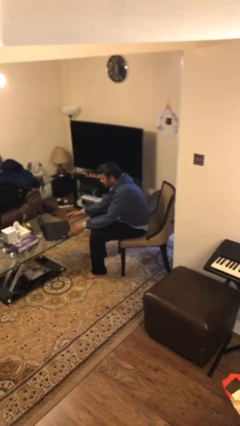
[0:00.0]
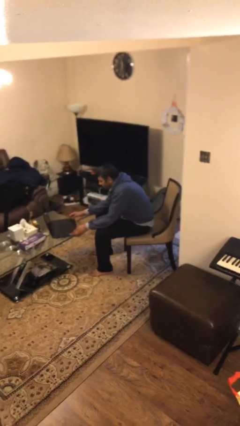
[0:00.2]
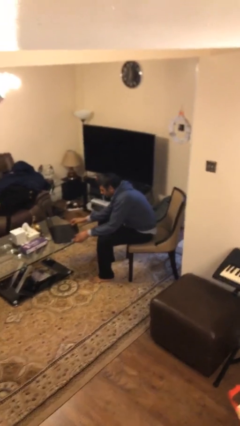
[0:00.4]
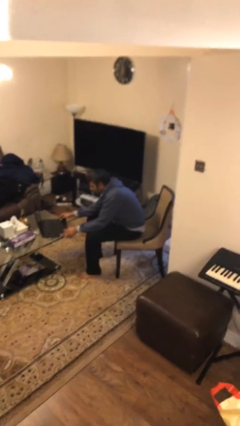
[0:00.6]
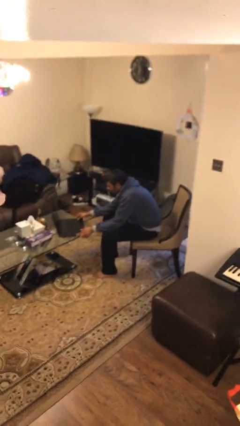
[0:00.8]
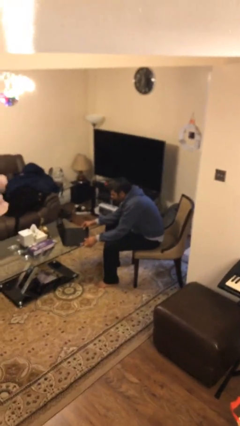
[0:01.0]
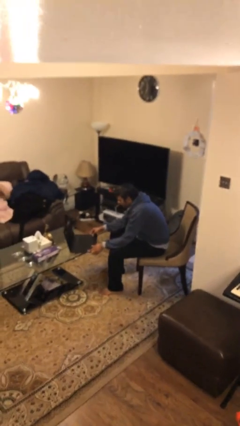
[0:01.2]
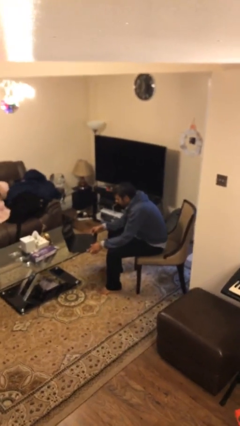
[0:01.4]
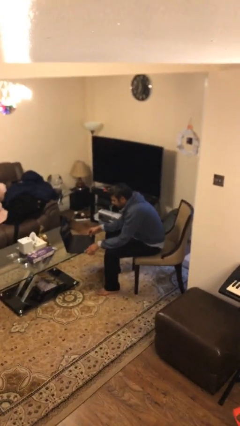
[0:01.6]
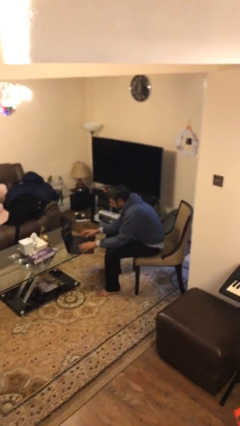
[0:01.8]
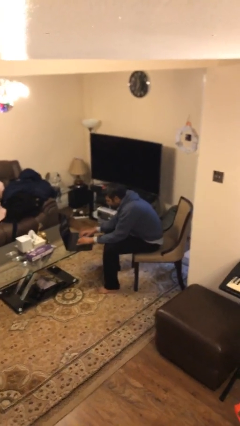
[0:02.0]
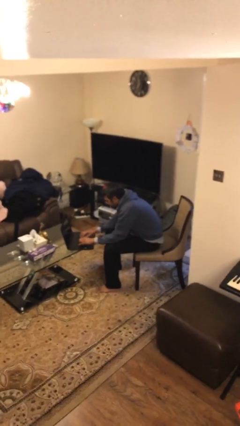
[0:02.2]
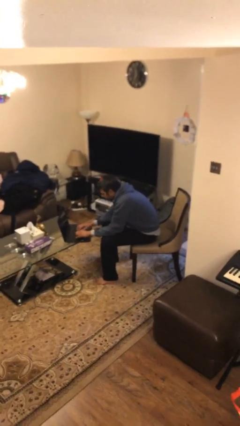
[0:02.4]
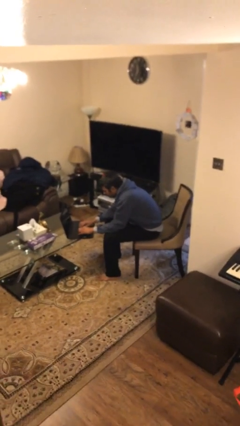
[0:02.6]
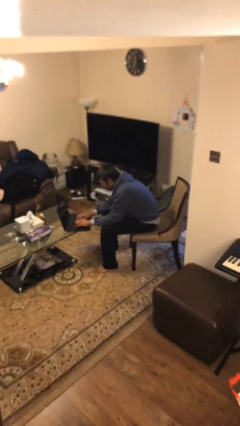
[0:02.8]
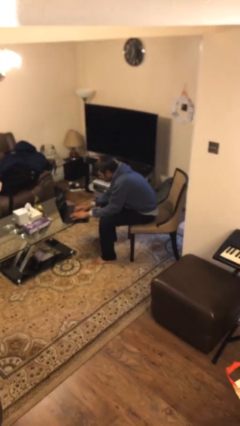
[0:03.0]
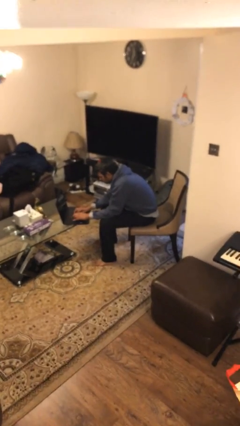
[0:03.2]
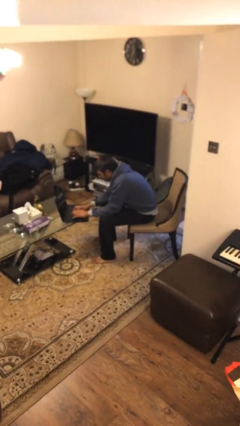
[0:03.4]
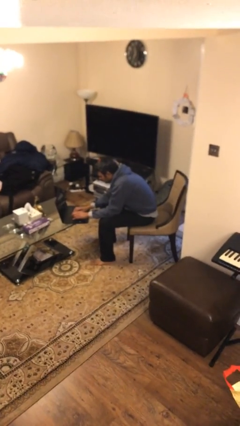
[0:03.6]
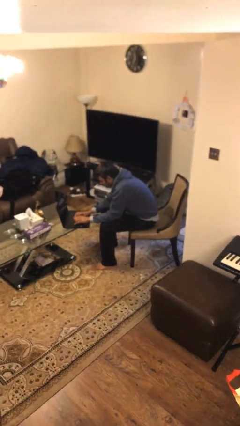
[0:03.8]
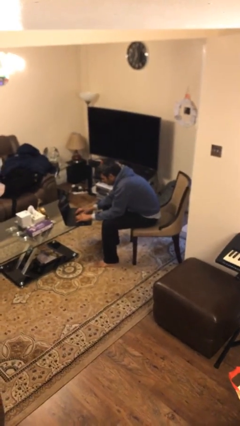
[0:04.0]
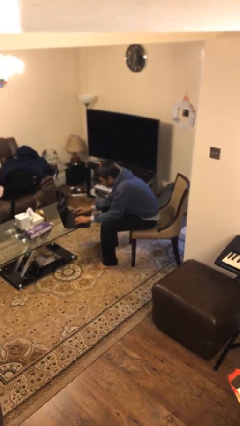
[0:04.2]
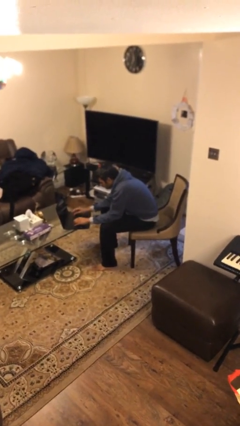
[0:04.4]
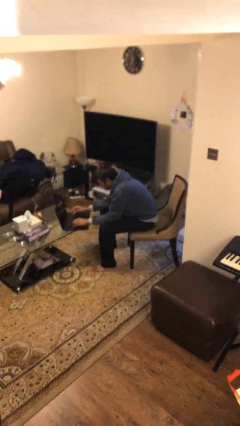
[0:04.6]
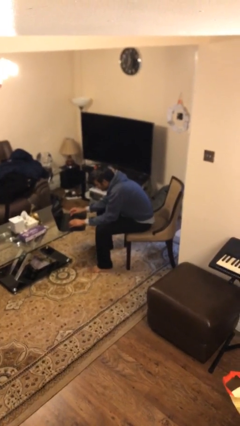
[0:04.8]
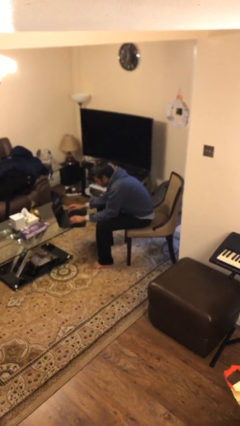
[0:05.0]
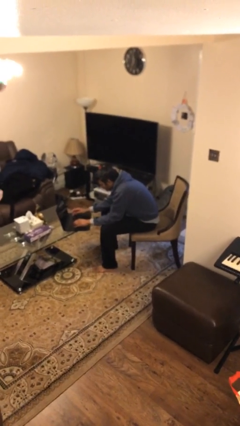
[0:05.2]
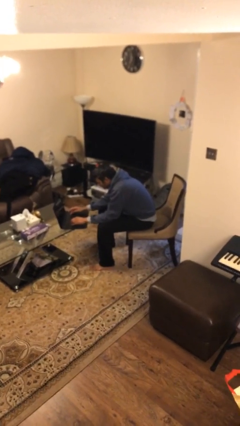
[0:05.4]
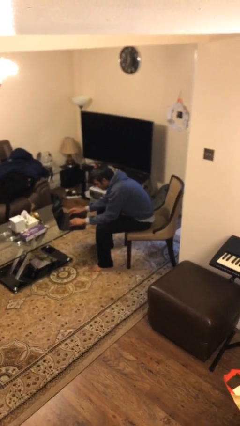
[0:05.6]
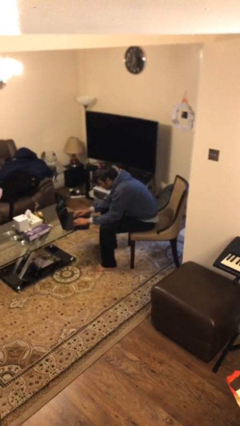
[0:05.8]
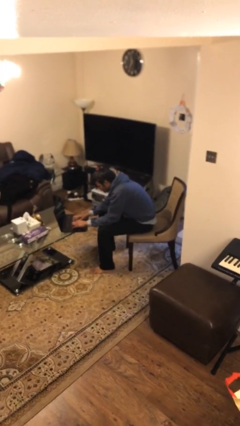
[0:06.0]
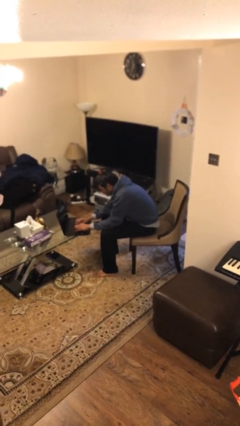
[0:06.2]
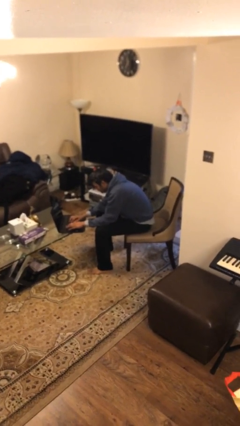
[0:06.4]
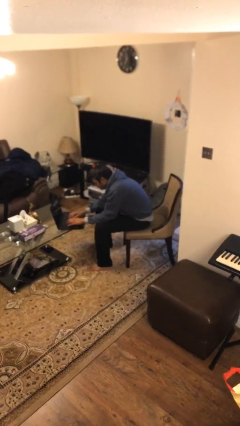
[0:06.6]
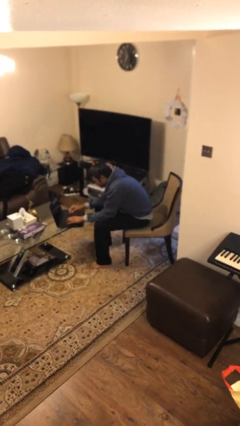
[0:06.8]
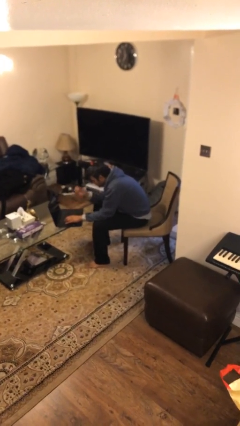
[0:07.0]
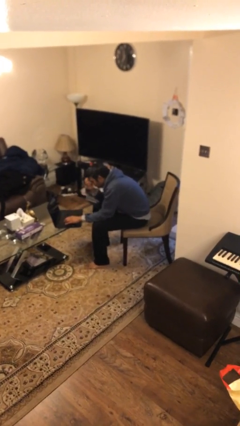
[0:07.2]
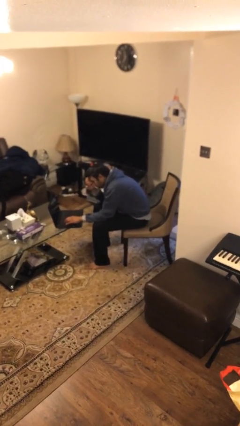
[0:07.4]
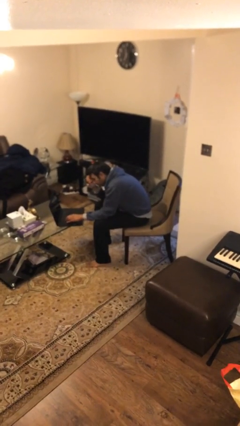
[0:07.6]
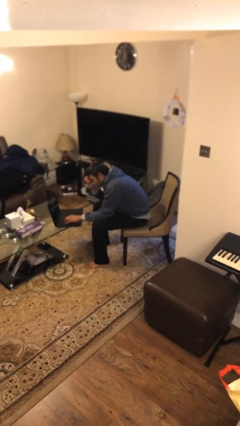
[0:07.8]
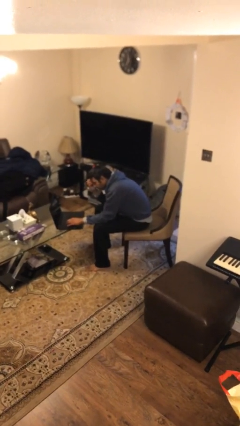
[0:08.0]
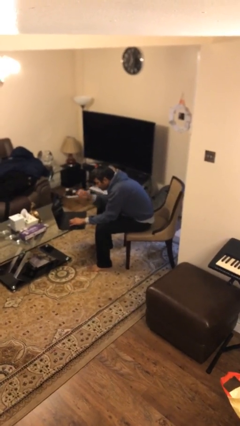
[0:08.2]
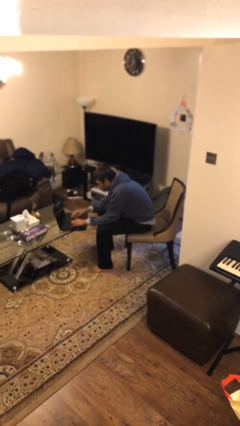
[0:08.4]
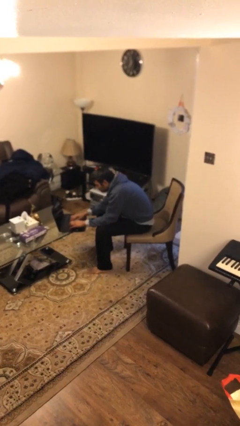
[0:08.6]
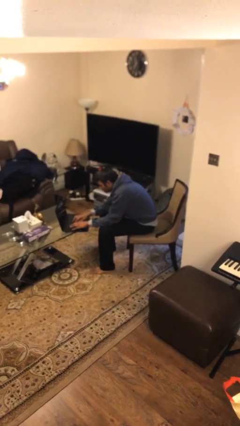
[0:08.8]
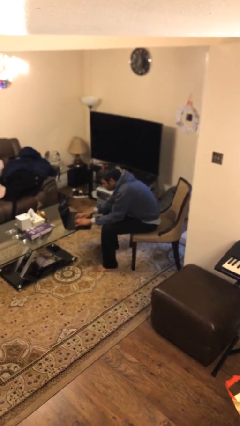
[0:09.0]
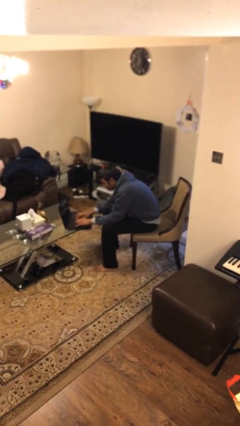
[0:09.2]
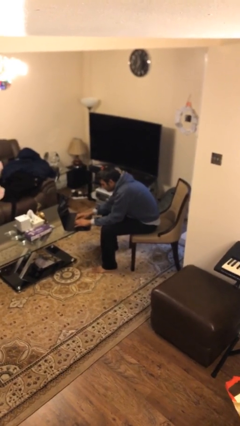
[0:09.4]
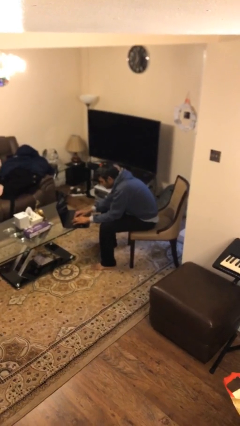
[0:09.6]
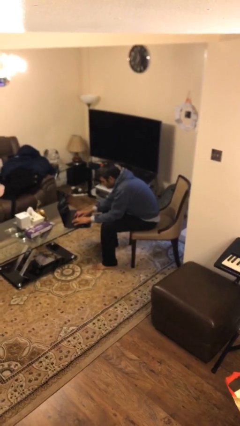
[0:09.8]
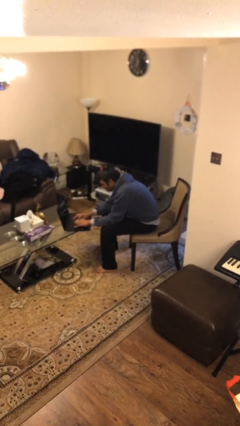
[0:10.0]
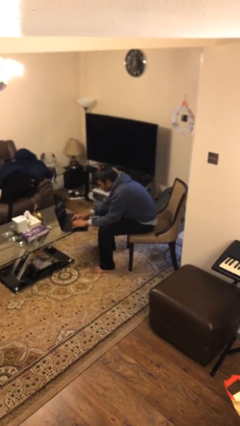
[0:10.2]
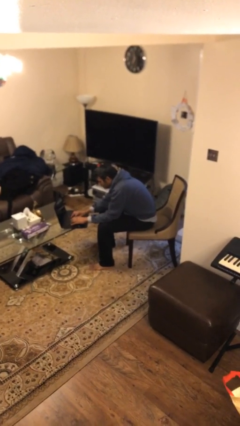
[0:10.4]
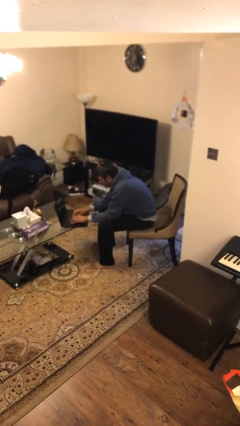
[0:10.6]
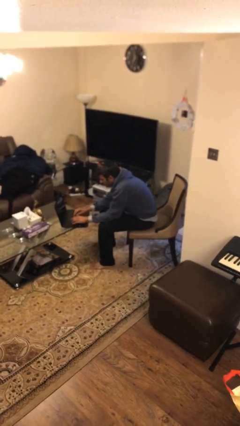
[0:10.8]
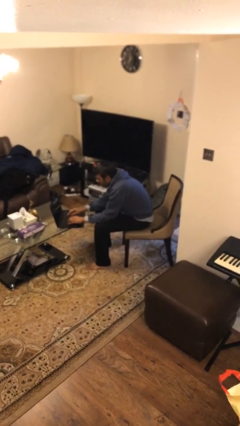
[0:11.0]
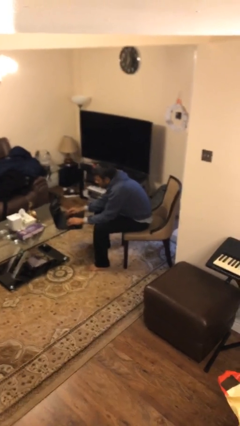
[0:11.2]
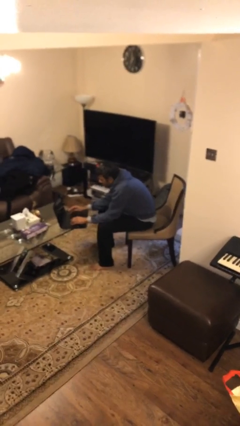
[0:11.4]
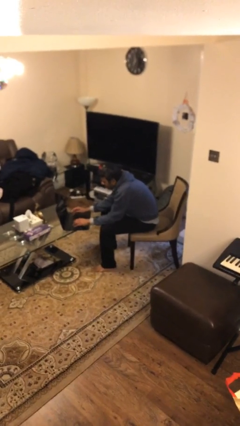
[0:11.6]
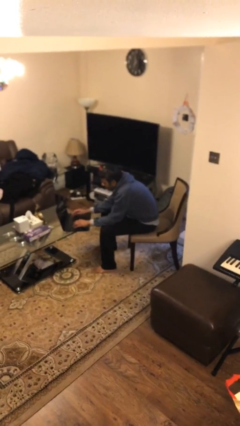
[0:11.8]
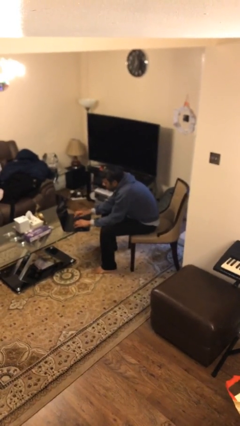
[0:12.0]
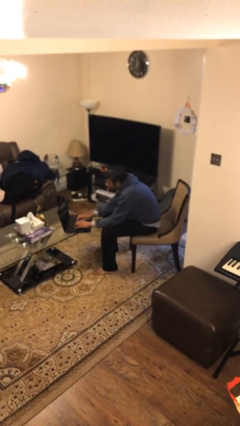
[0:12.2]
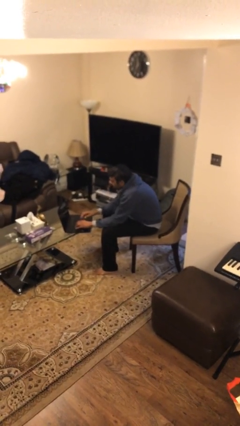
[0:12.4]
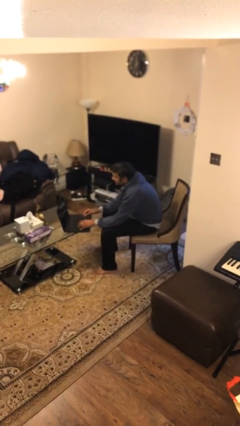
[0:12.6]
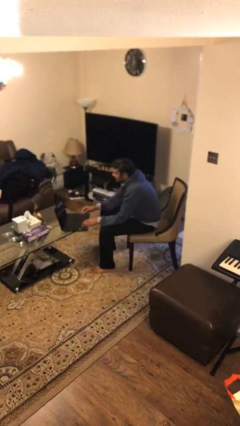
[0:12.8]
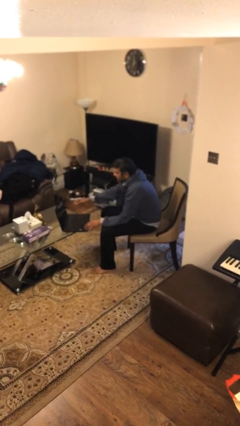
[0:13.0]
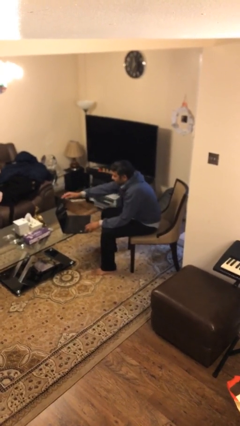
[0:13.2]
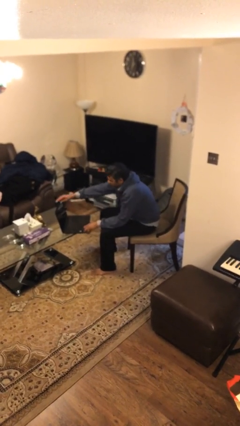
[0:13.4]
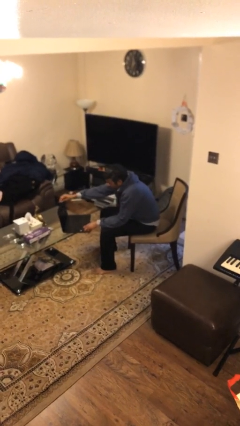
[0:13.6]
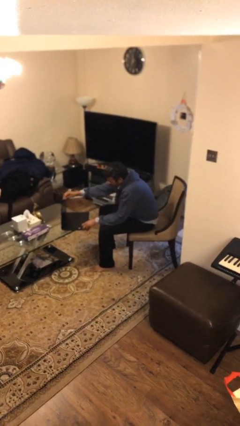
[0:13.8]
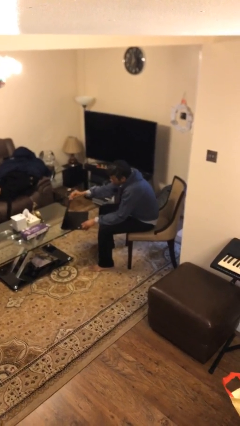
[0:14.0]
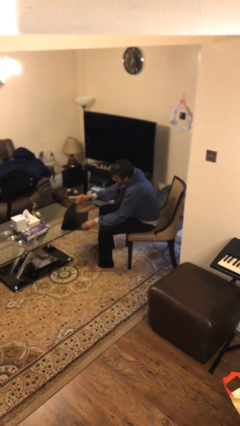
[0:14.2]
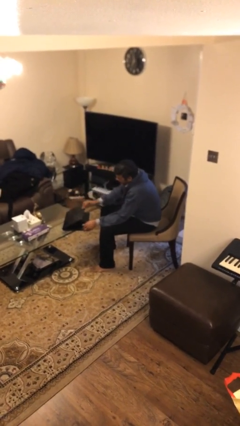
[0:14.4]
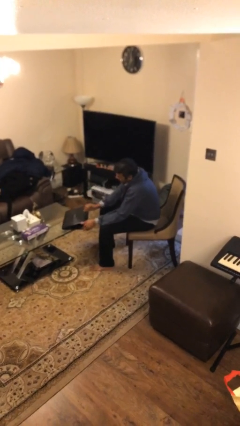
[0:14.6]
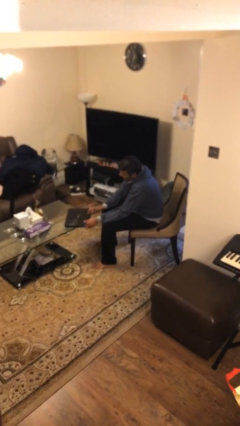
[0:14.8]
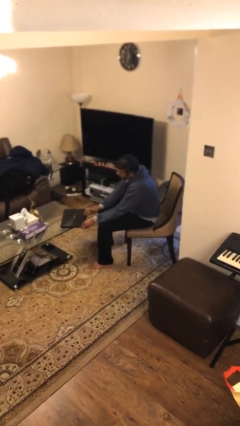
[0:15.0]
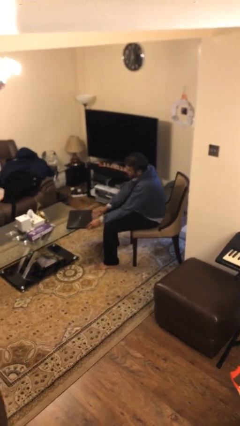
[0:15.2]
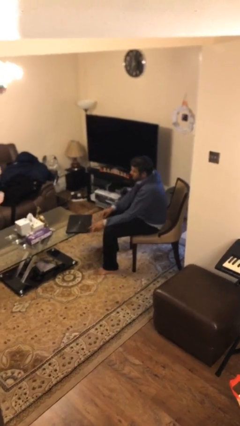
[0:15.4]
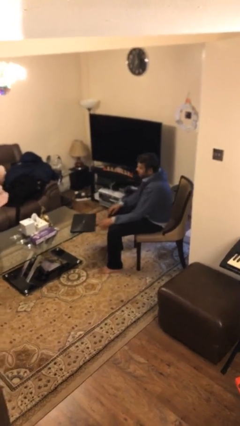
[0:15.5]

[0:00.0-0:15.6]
person interacts with laptop

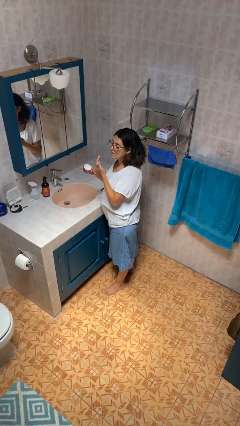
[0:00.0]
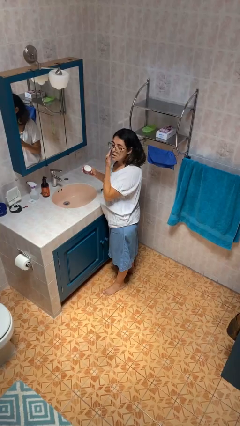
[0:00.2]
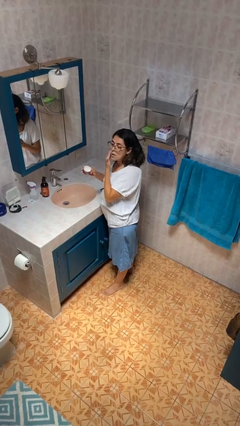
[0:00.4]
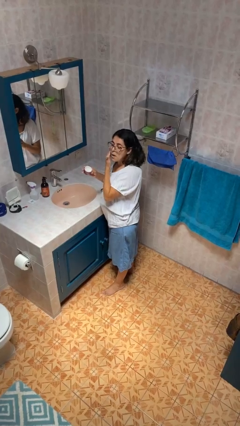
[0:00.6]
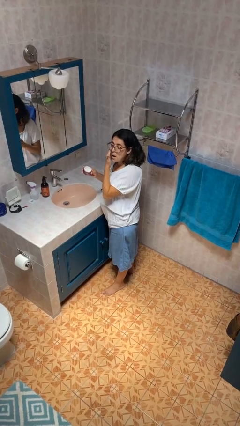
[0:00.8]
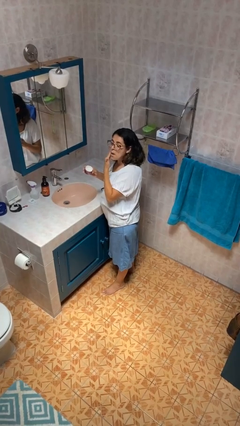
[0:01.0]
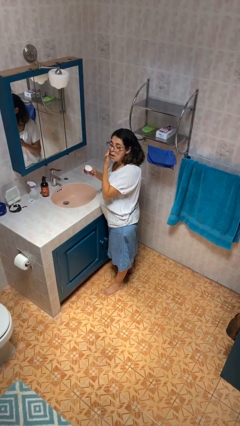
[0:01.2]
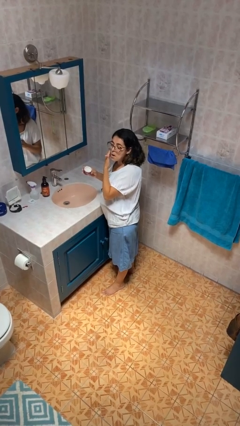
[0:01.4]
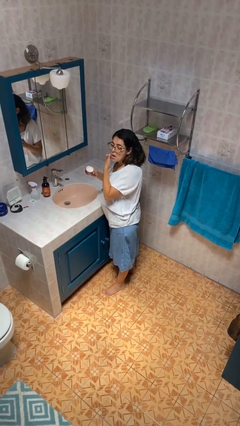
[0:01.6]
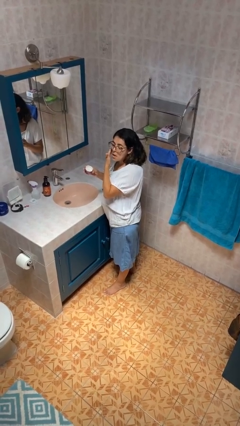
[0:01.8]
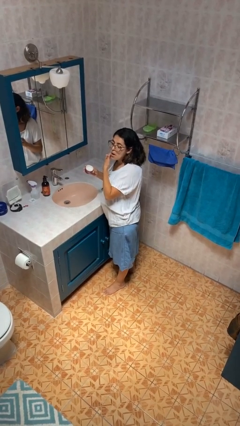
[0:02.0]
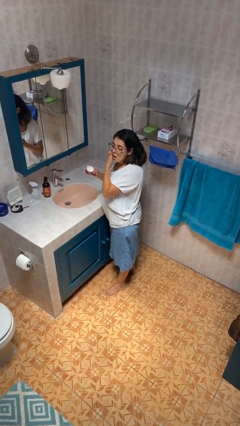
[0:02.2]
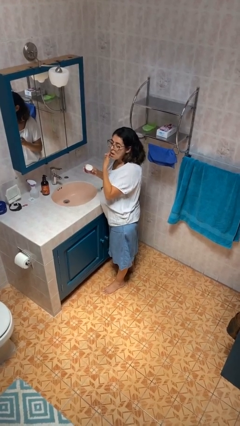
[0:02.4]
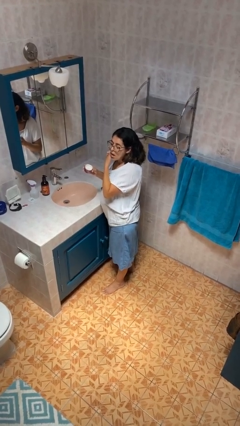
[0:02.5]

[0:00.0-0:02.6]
person applies facial moisturizer
